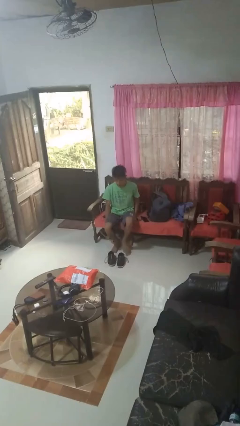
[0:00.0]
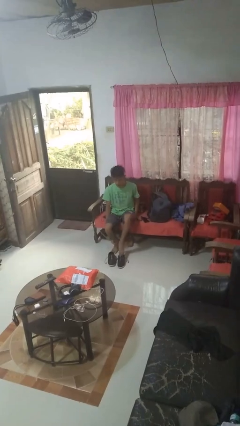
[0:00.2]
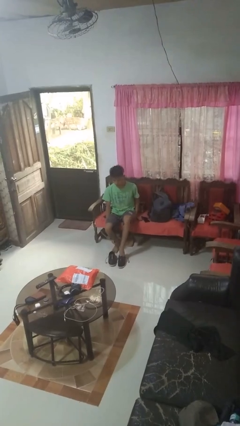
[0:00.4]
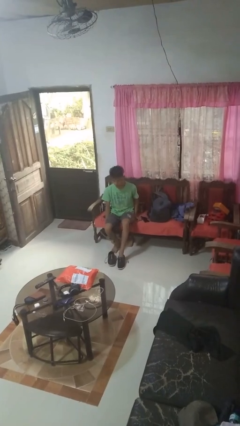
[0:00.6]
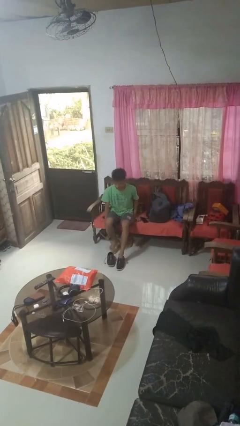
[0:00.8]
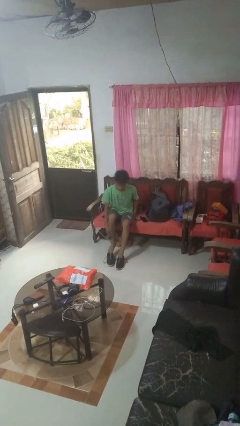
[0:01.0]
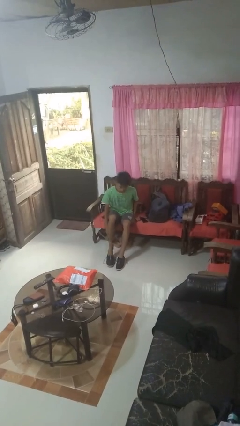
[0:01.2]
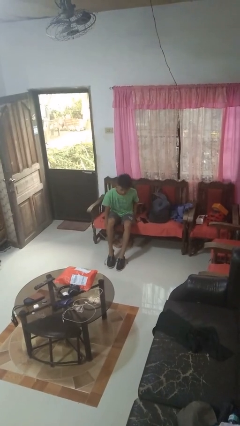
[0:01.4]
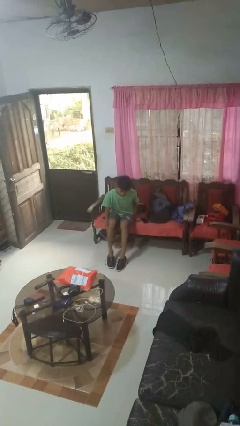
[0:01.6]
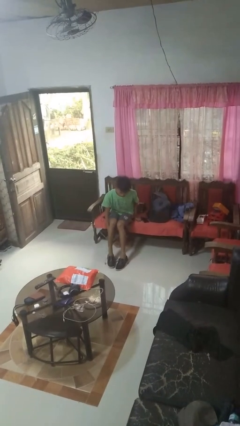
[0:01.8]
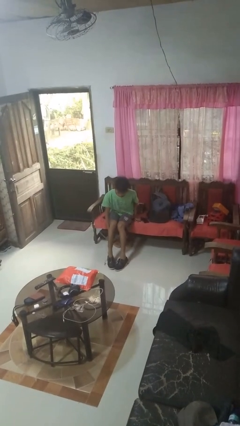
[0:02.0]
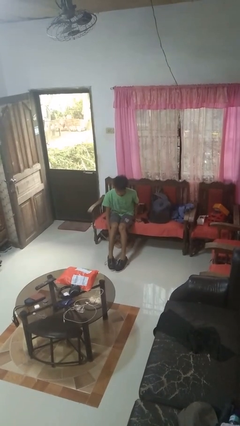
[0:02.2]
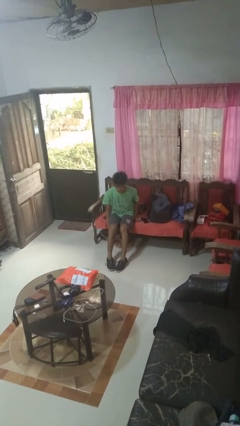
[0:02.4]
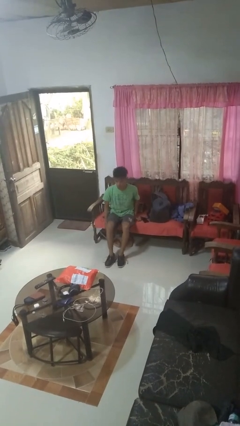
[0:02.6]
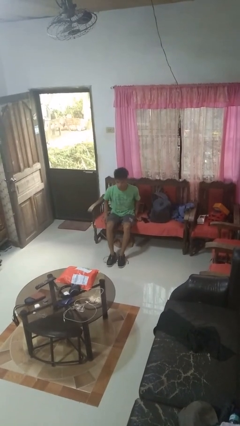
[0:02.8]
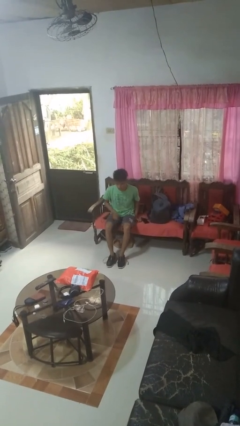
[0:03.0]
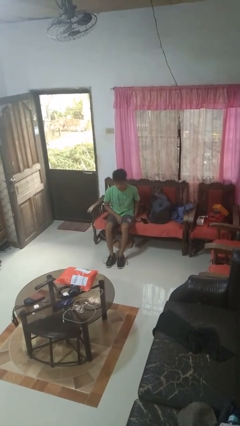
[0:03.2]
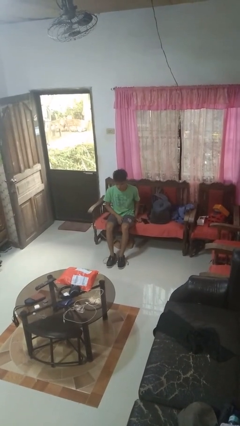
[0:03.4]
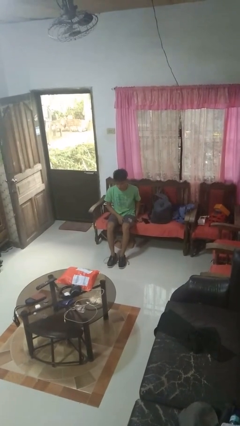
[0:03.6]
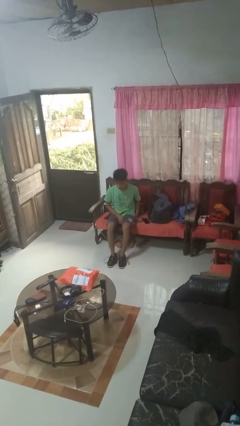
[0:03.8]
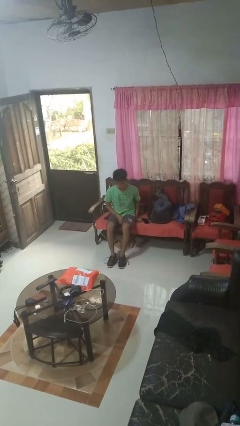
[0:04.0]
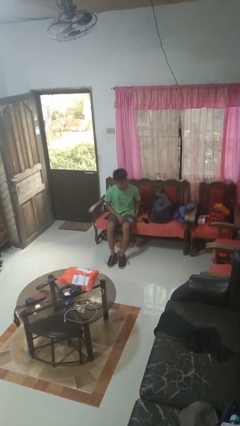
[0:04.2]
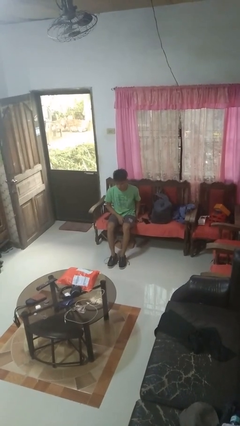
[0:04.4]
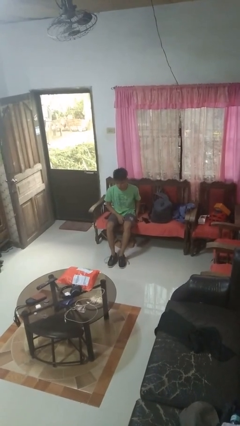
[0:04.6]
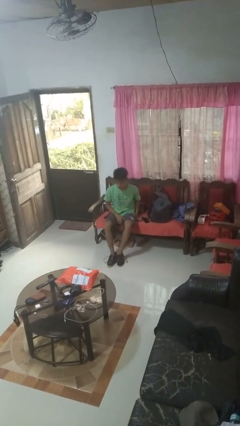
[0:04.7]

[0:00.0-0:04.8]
person puts on shoes

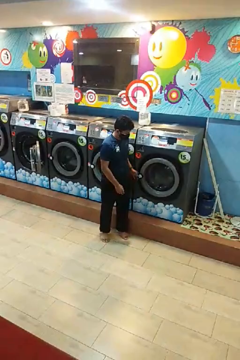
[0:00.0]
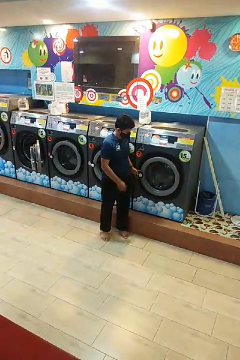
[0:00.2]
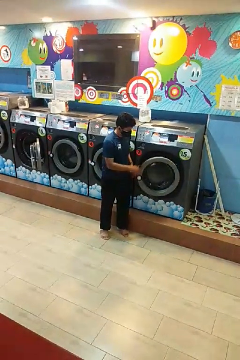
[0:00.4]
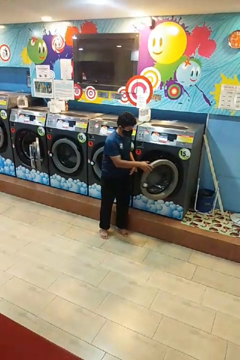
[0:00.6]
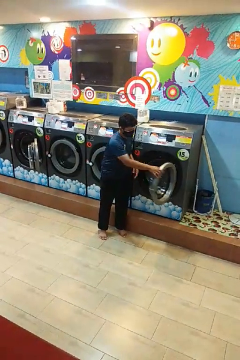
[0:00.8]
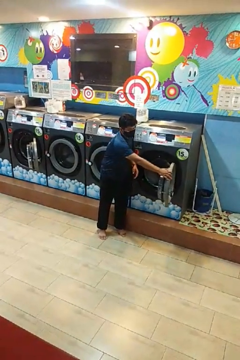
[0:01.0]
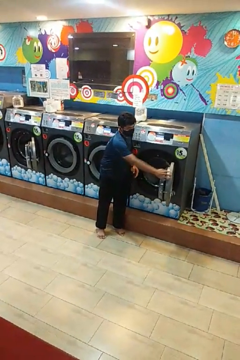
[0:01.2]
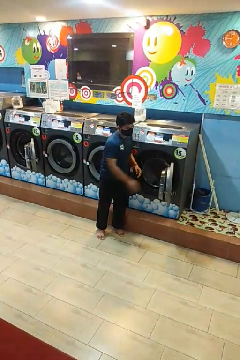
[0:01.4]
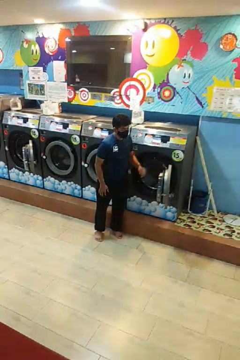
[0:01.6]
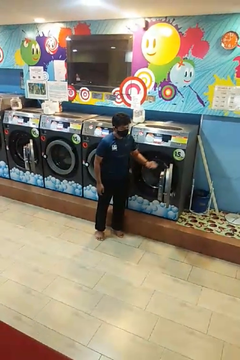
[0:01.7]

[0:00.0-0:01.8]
person opens clothes washer

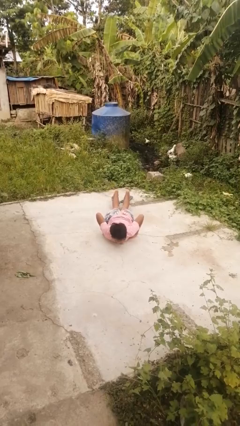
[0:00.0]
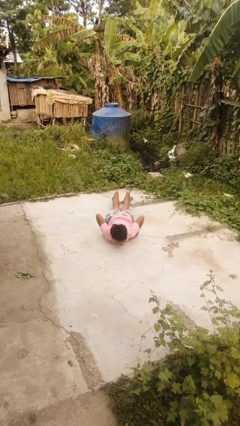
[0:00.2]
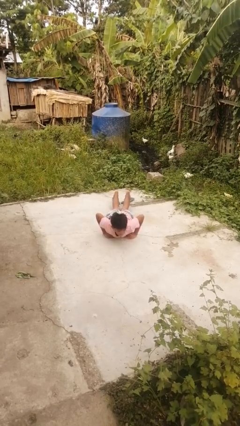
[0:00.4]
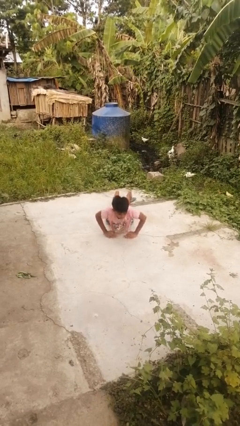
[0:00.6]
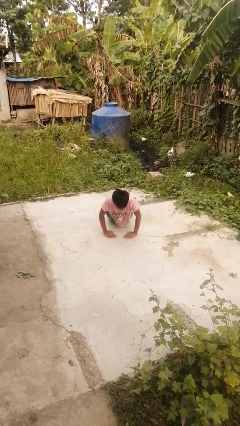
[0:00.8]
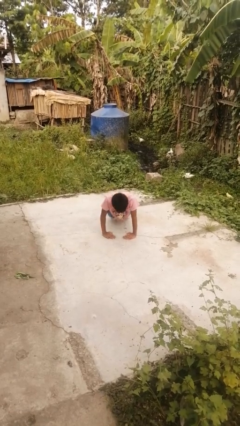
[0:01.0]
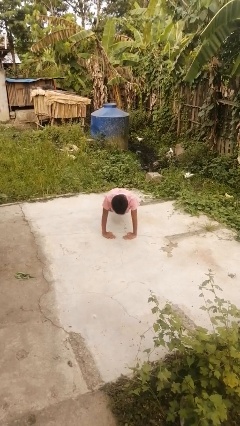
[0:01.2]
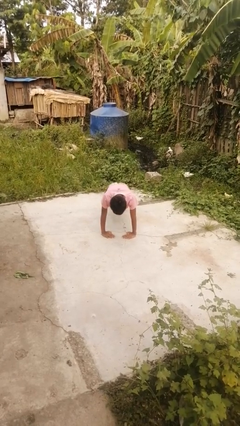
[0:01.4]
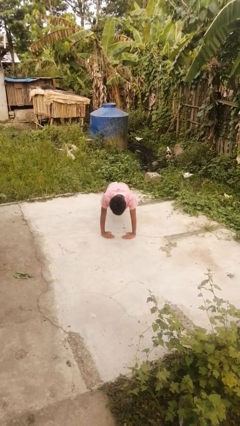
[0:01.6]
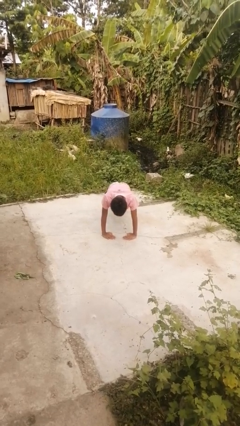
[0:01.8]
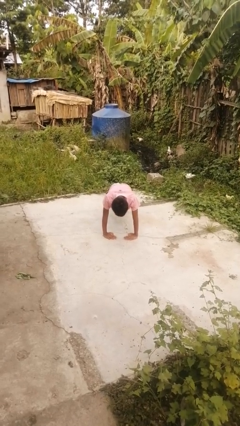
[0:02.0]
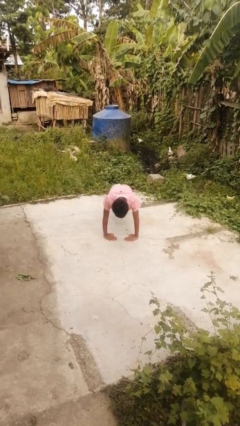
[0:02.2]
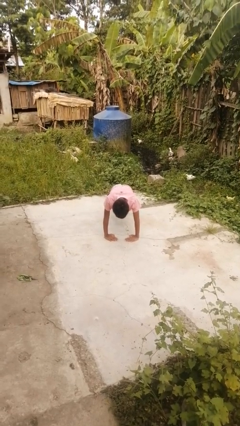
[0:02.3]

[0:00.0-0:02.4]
person exercises with pushup

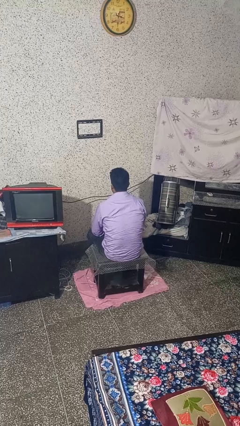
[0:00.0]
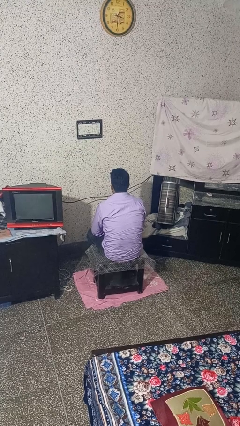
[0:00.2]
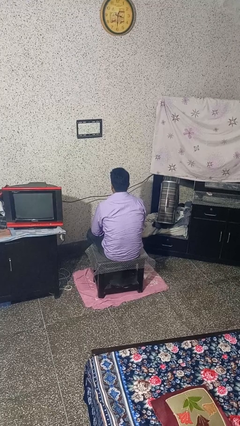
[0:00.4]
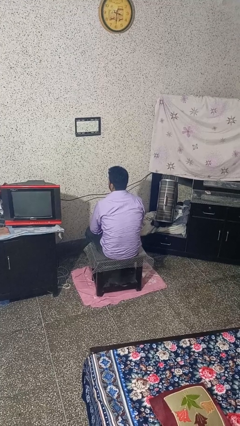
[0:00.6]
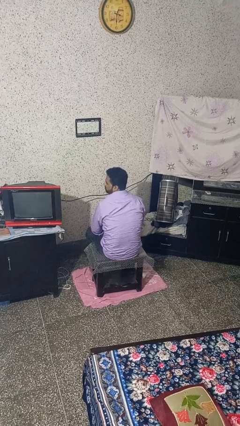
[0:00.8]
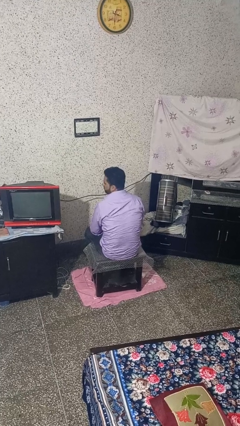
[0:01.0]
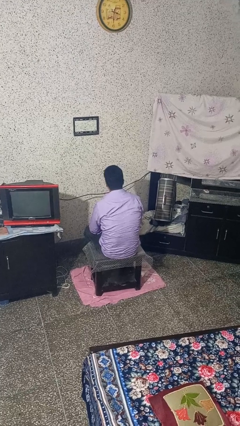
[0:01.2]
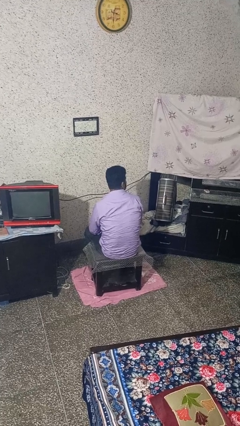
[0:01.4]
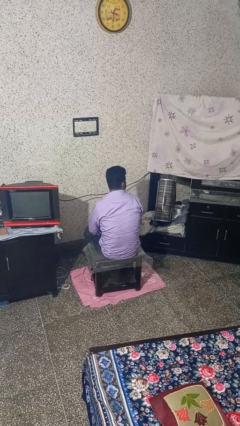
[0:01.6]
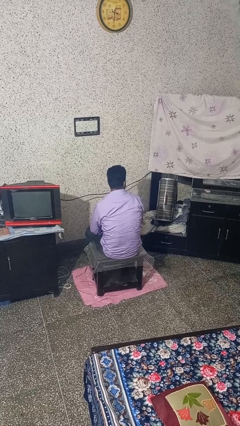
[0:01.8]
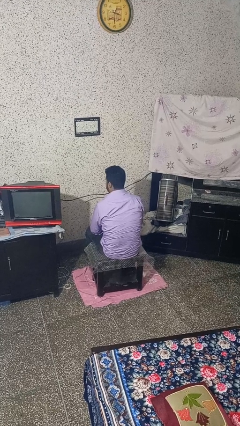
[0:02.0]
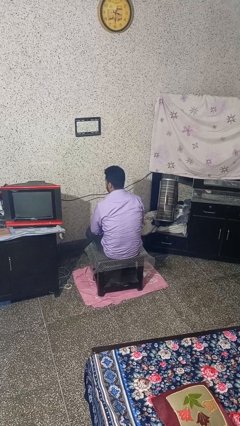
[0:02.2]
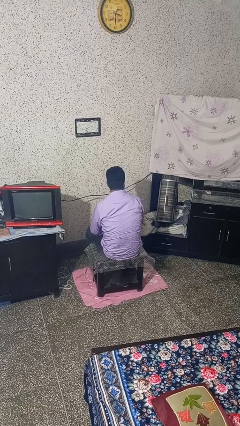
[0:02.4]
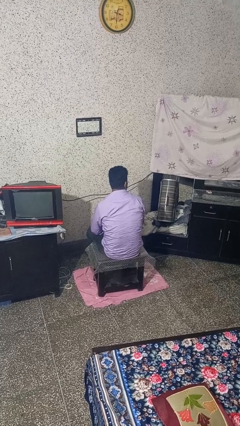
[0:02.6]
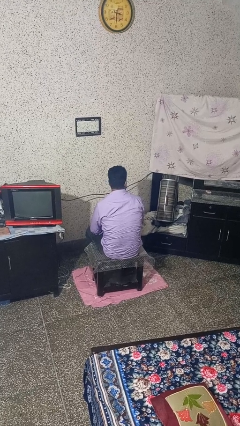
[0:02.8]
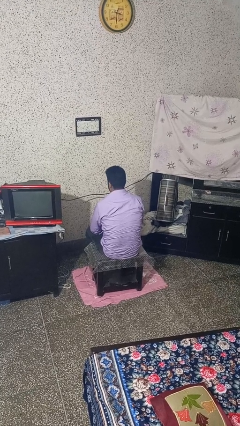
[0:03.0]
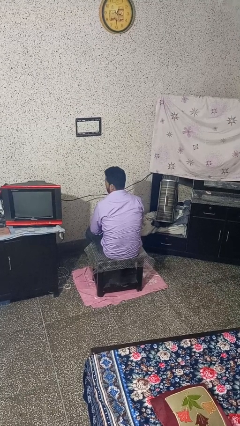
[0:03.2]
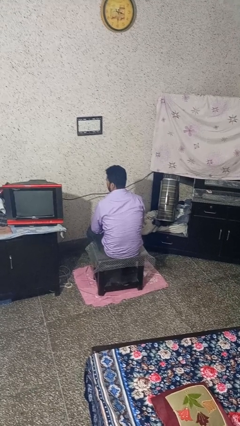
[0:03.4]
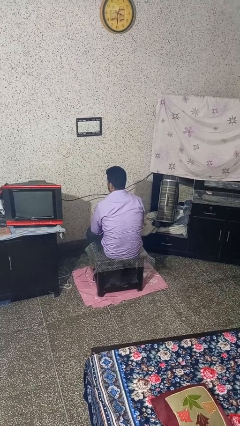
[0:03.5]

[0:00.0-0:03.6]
person shakes head

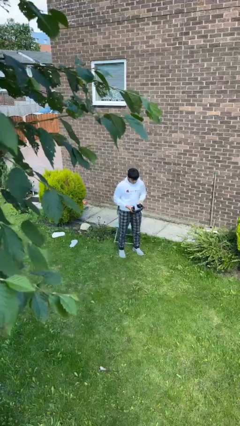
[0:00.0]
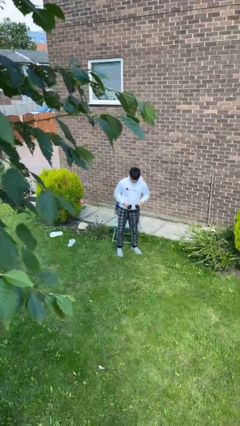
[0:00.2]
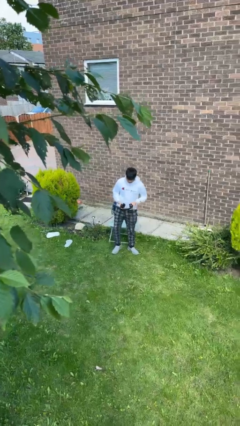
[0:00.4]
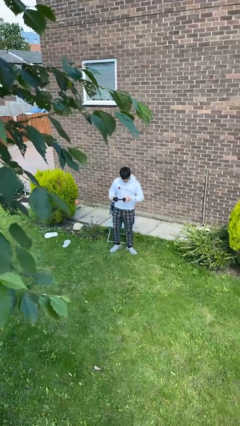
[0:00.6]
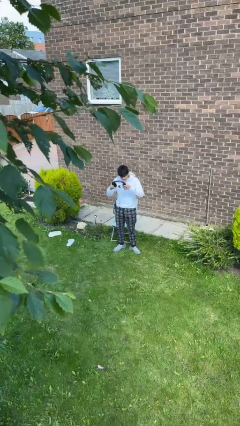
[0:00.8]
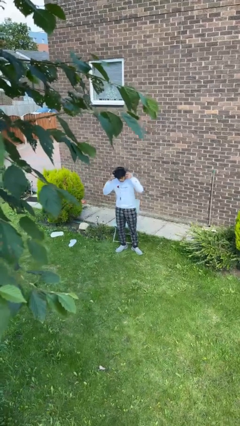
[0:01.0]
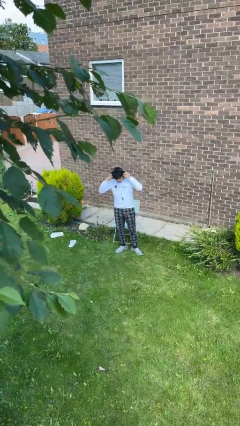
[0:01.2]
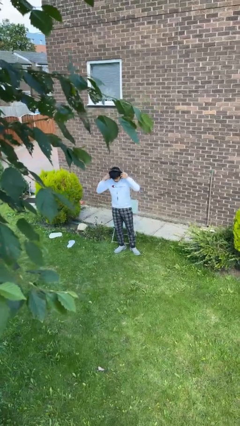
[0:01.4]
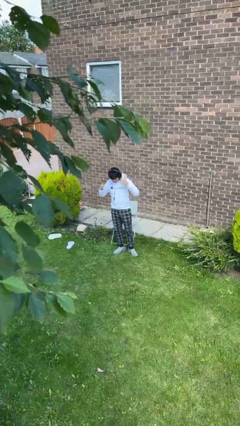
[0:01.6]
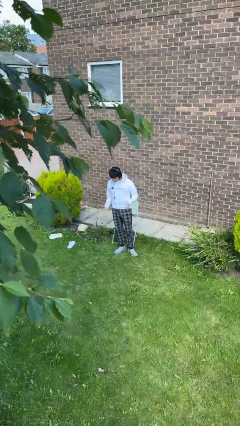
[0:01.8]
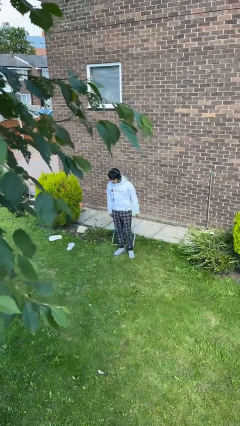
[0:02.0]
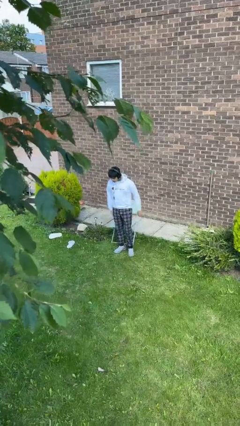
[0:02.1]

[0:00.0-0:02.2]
person puts on headphones

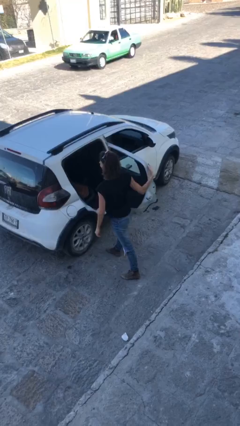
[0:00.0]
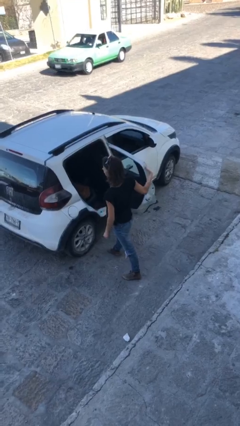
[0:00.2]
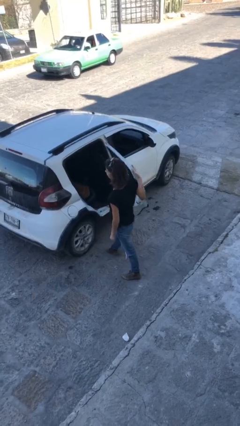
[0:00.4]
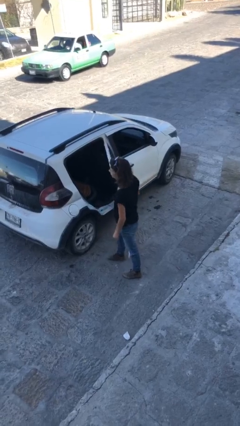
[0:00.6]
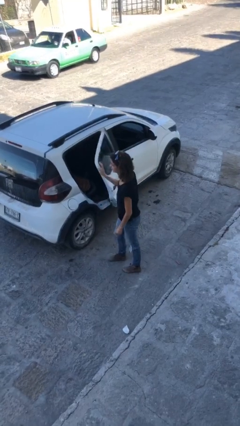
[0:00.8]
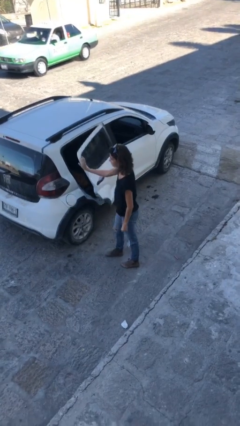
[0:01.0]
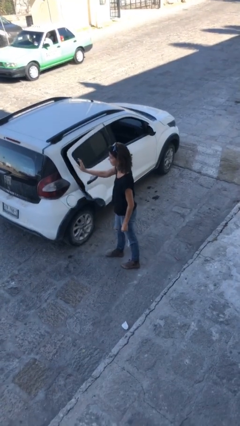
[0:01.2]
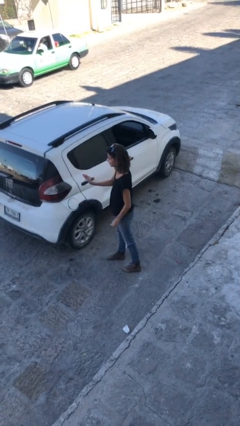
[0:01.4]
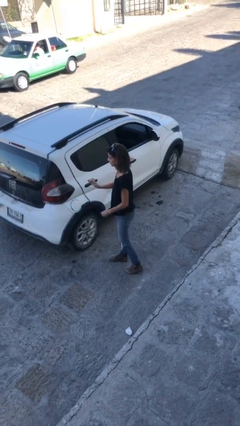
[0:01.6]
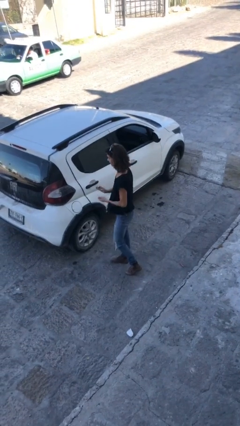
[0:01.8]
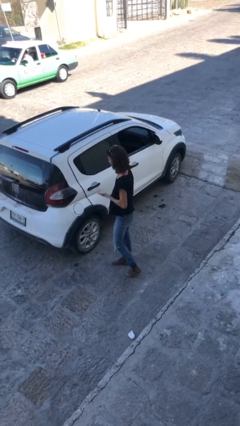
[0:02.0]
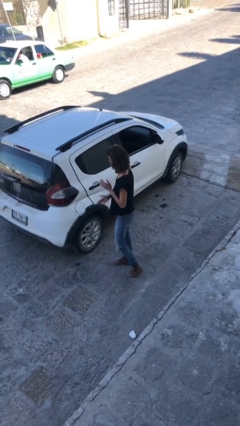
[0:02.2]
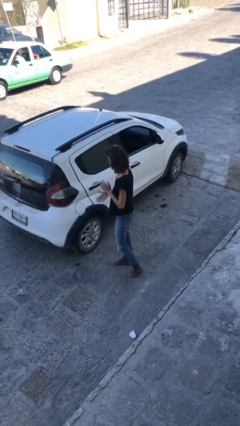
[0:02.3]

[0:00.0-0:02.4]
person closes car door

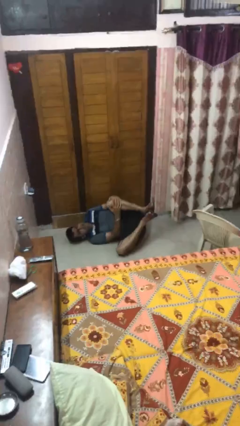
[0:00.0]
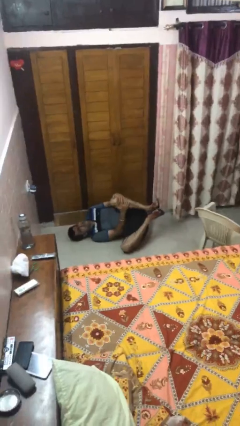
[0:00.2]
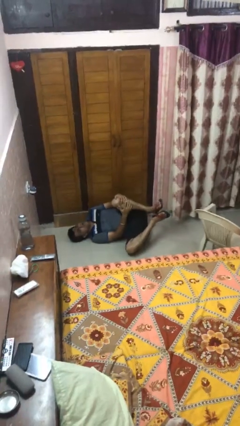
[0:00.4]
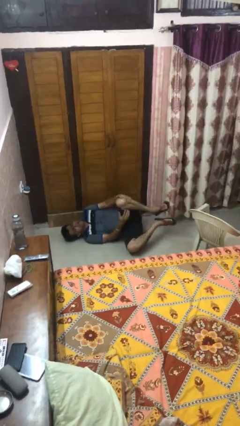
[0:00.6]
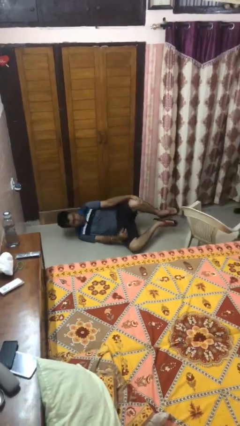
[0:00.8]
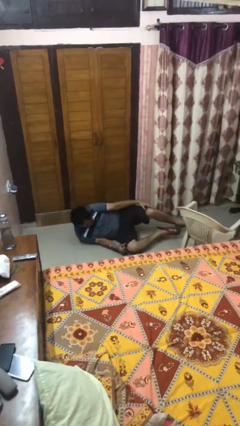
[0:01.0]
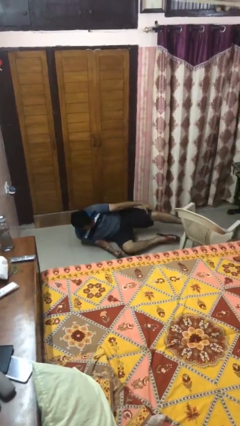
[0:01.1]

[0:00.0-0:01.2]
person lies down on floor
